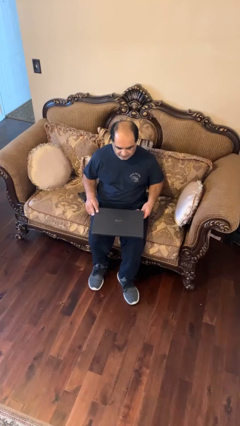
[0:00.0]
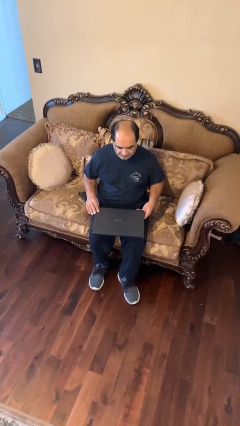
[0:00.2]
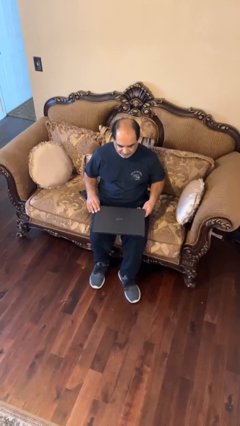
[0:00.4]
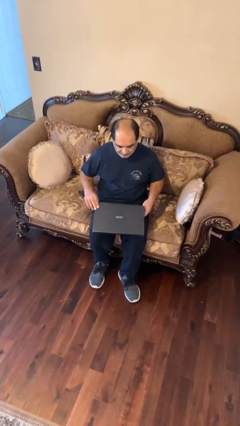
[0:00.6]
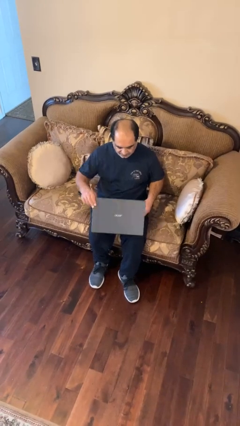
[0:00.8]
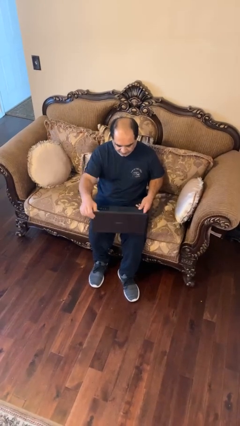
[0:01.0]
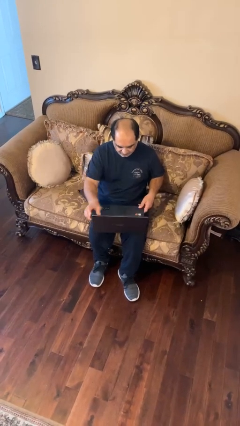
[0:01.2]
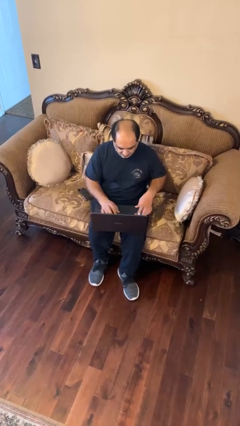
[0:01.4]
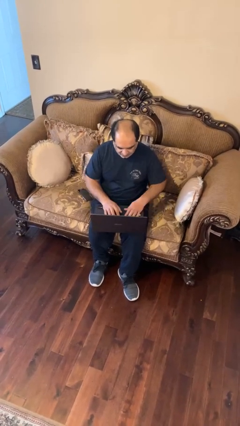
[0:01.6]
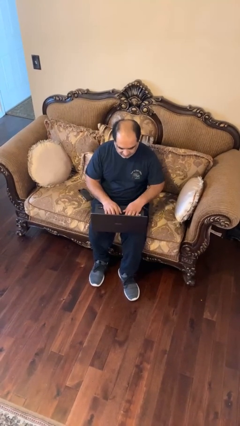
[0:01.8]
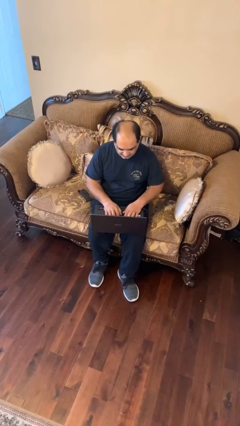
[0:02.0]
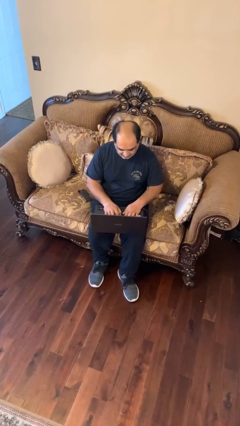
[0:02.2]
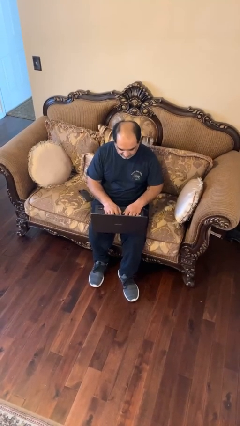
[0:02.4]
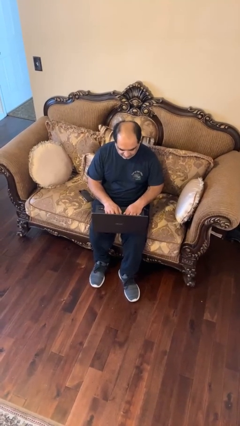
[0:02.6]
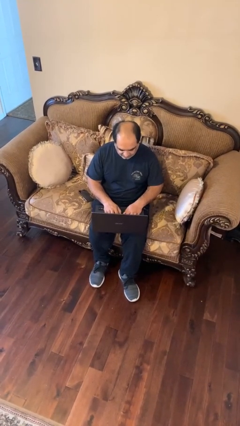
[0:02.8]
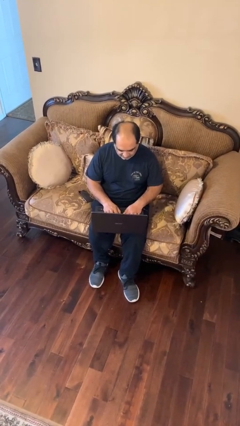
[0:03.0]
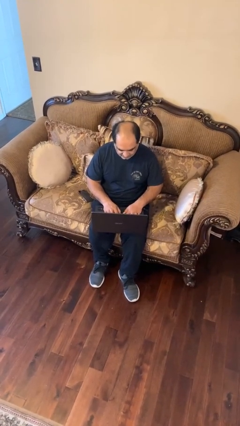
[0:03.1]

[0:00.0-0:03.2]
person interacts with laptop

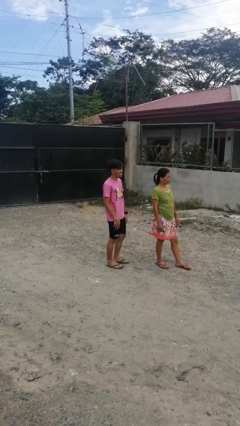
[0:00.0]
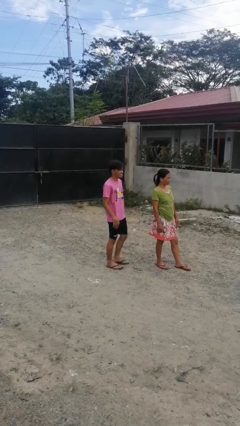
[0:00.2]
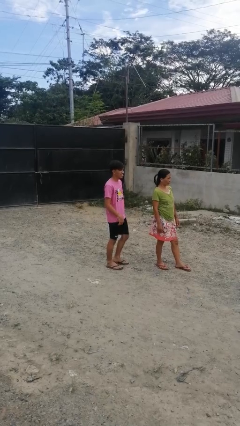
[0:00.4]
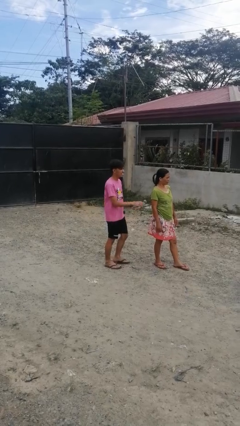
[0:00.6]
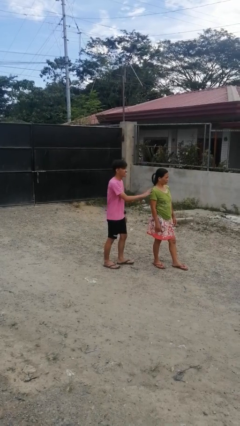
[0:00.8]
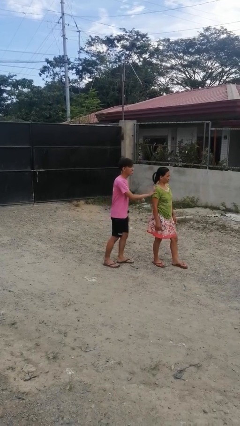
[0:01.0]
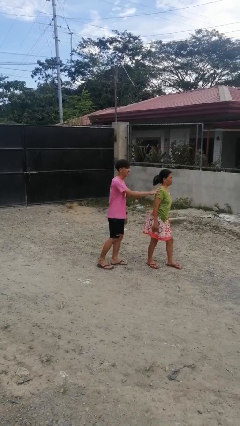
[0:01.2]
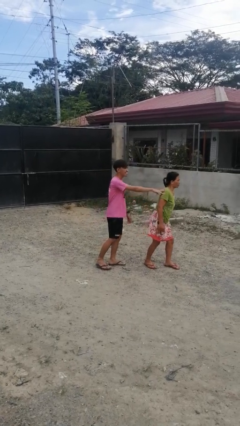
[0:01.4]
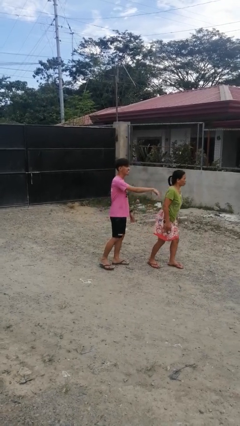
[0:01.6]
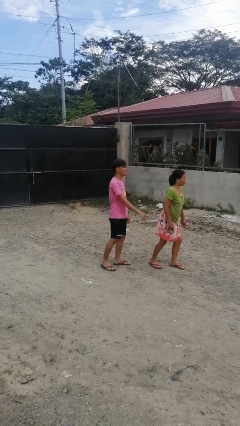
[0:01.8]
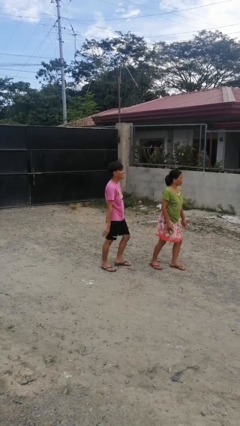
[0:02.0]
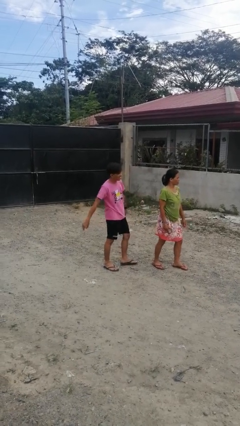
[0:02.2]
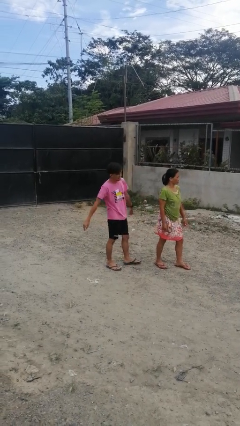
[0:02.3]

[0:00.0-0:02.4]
person shoves person

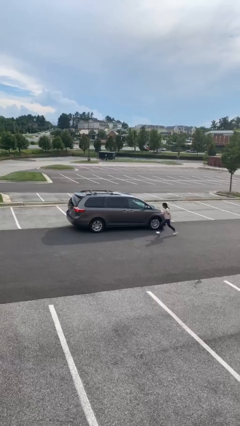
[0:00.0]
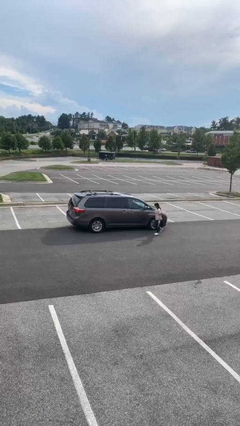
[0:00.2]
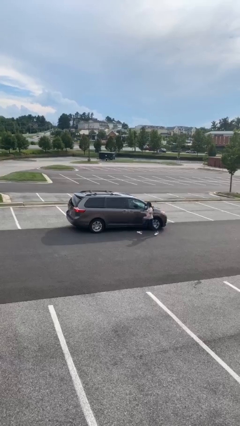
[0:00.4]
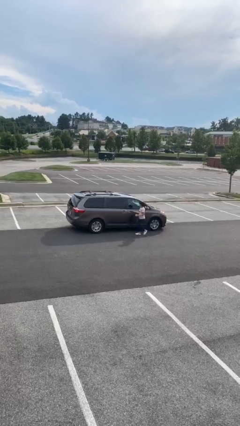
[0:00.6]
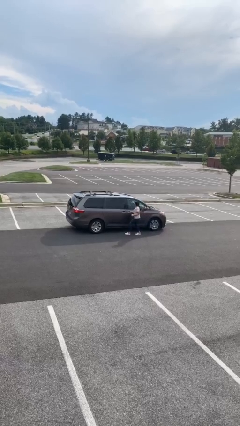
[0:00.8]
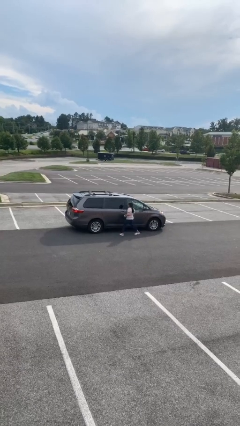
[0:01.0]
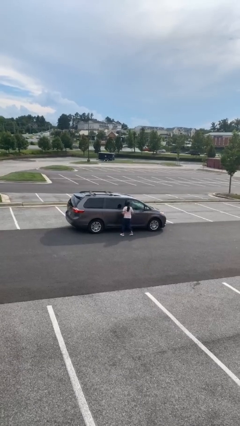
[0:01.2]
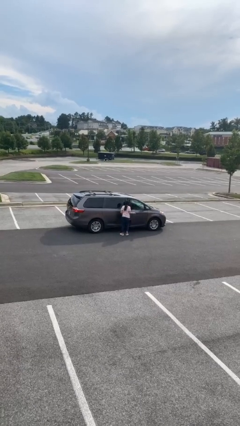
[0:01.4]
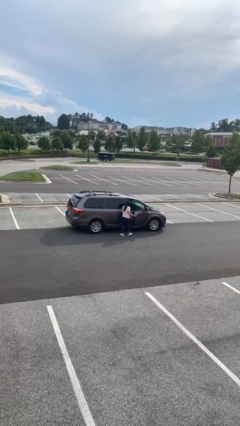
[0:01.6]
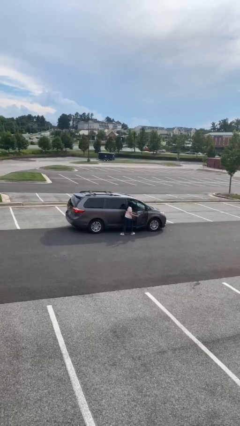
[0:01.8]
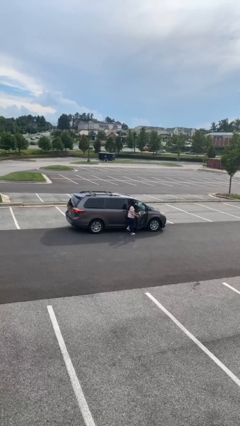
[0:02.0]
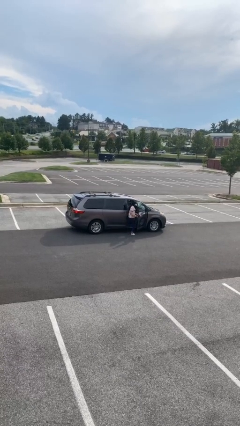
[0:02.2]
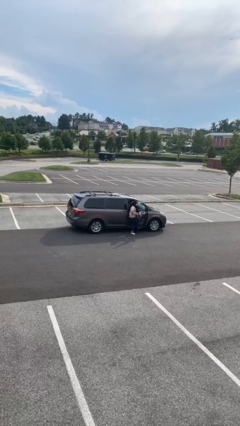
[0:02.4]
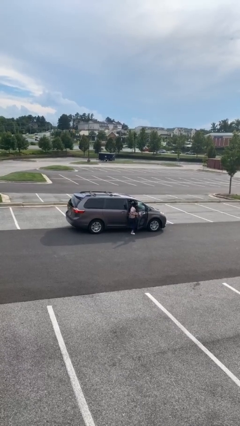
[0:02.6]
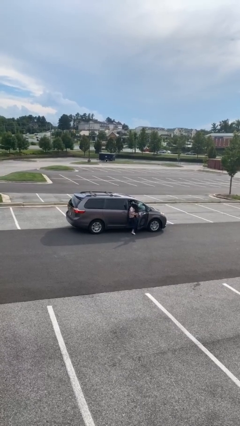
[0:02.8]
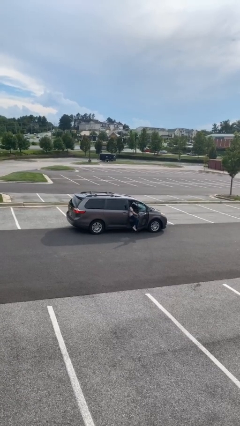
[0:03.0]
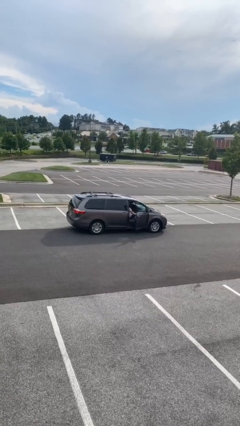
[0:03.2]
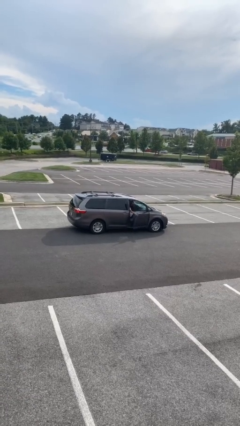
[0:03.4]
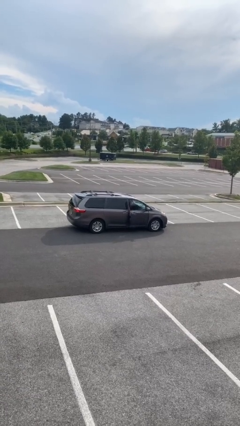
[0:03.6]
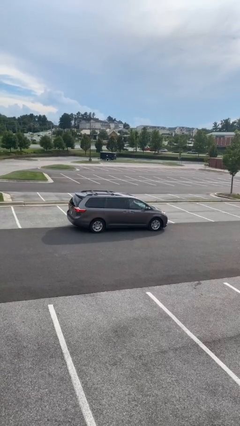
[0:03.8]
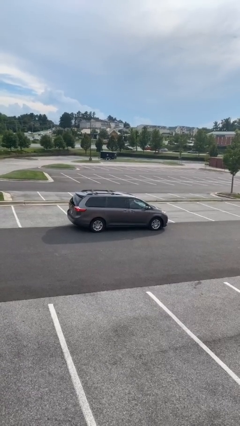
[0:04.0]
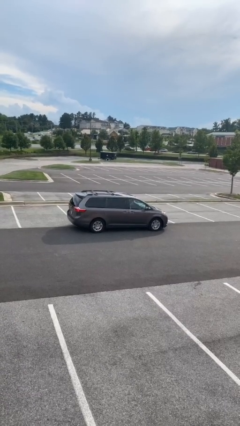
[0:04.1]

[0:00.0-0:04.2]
car picks up person

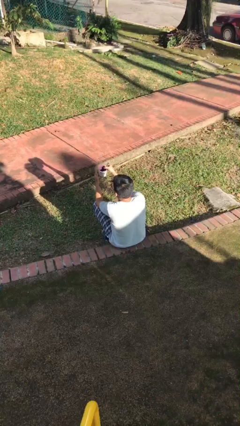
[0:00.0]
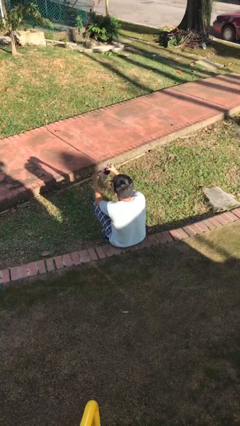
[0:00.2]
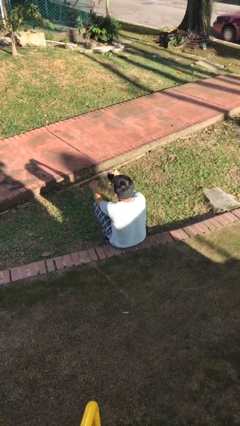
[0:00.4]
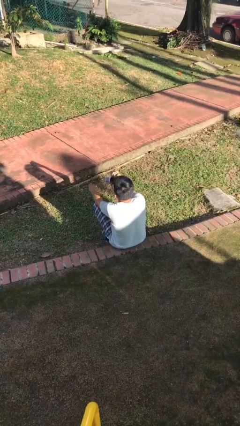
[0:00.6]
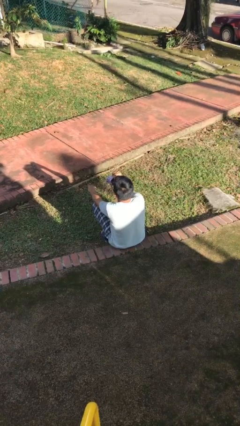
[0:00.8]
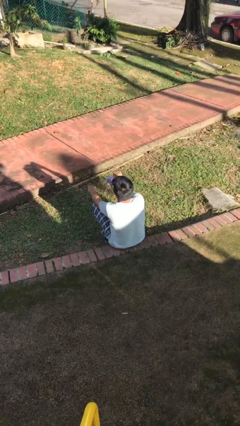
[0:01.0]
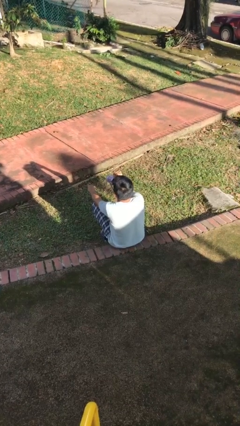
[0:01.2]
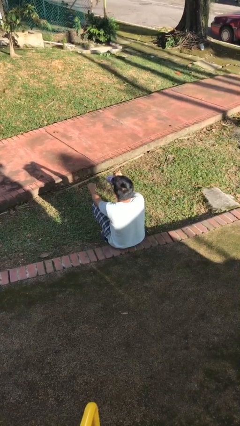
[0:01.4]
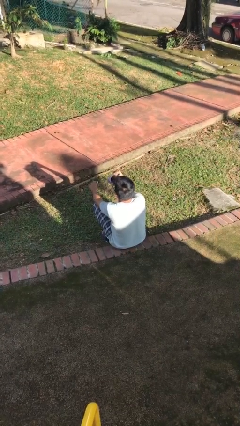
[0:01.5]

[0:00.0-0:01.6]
person drinks from mug

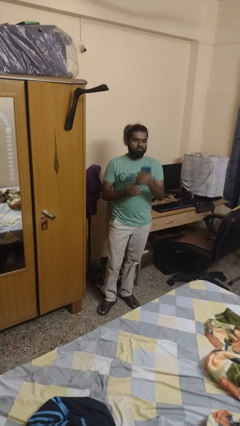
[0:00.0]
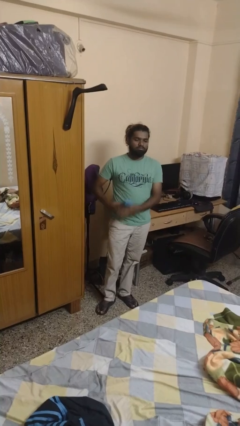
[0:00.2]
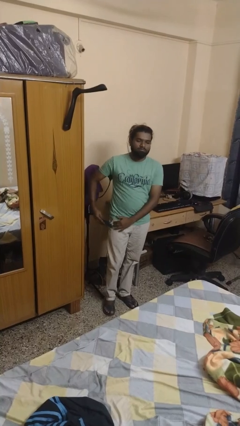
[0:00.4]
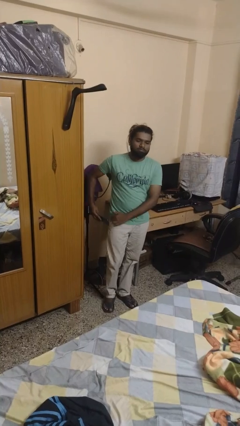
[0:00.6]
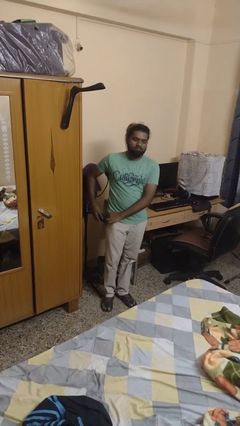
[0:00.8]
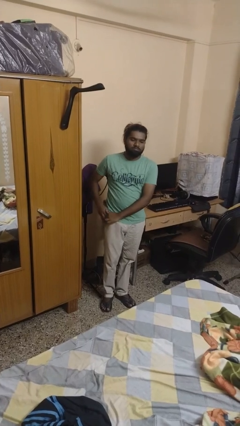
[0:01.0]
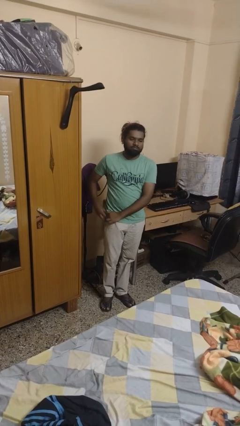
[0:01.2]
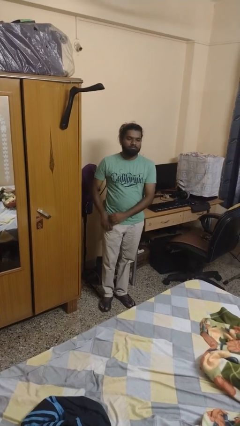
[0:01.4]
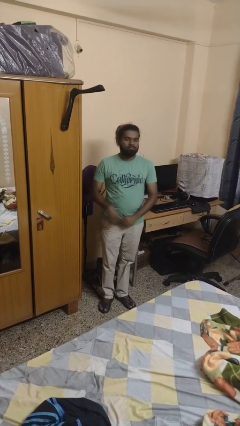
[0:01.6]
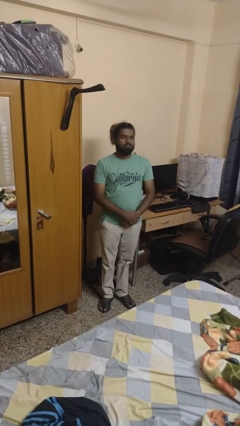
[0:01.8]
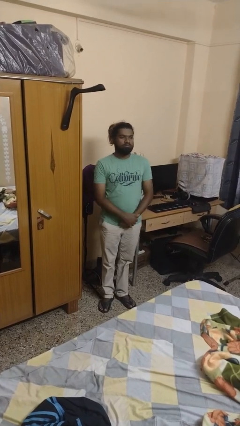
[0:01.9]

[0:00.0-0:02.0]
person puts phone into pocket

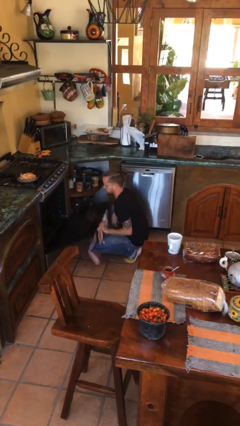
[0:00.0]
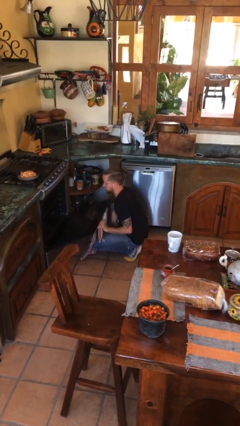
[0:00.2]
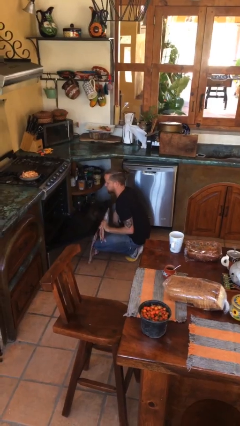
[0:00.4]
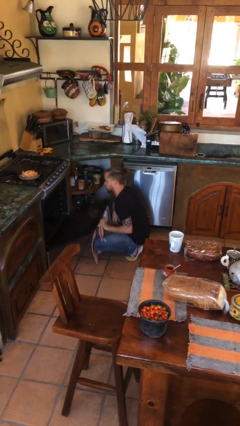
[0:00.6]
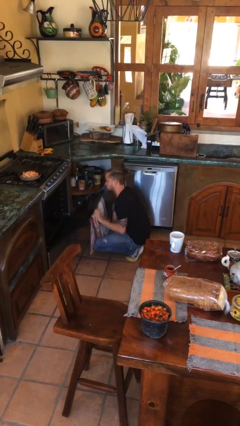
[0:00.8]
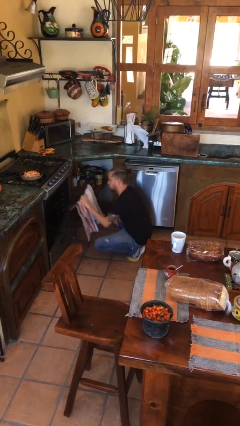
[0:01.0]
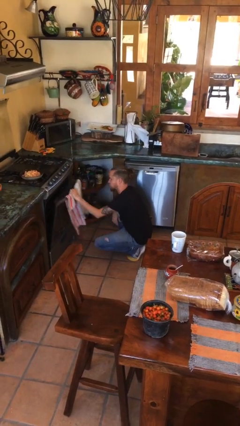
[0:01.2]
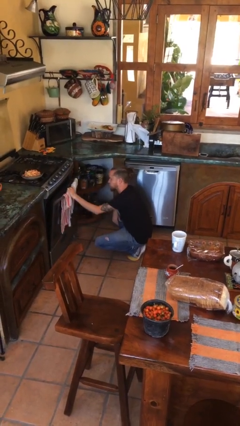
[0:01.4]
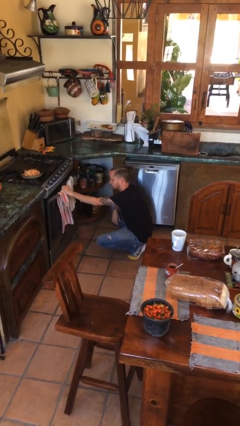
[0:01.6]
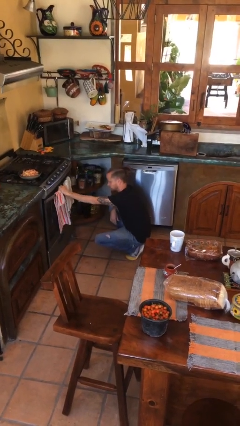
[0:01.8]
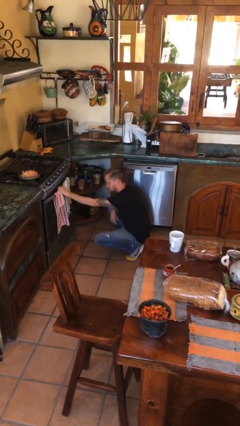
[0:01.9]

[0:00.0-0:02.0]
person closes oven door

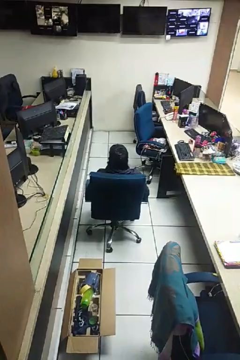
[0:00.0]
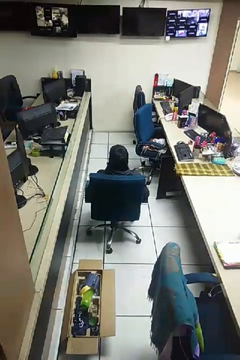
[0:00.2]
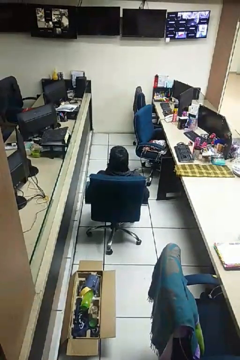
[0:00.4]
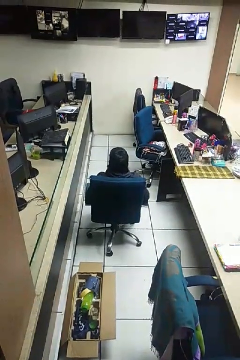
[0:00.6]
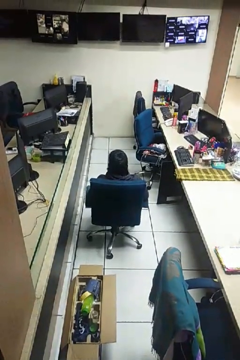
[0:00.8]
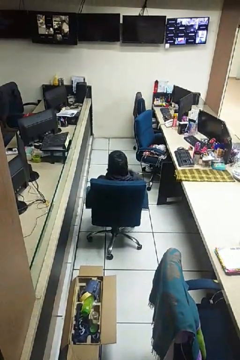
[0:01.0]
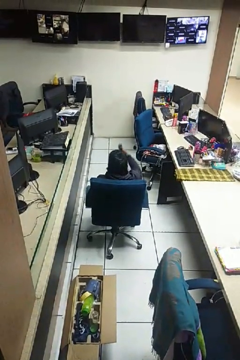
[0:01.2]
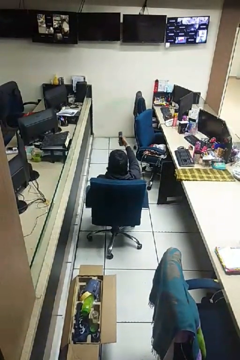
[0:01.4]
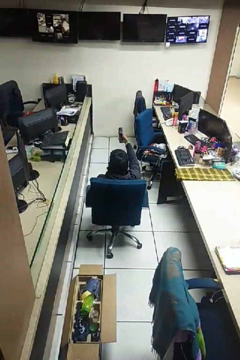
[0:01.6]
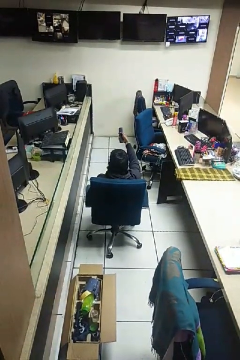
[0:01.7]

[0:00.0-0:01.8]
person uses television remote

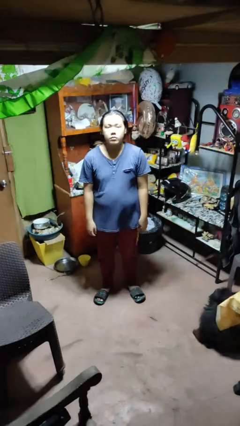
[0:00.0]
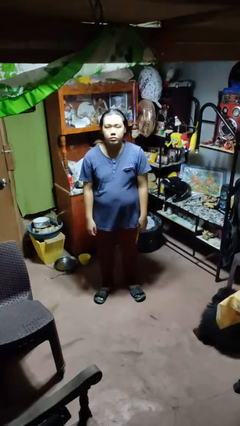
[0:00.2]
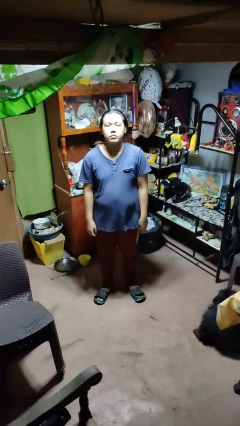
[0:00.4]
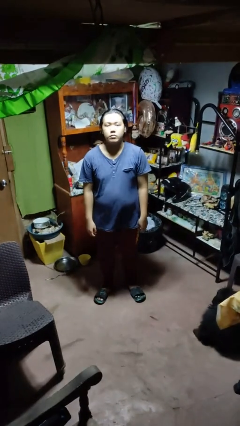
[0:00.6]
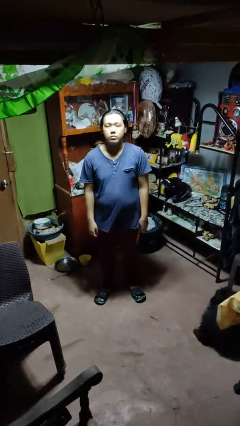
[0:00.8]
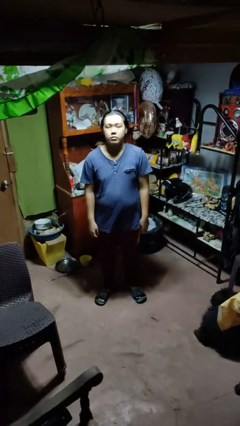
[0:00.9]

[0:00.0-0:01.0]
person nods head
